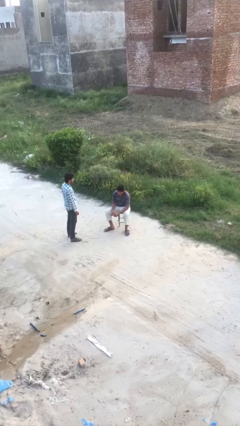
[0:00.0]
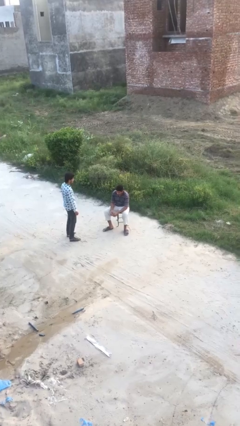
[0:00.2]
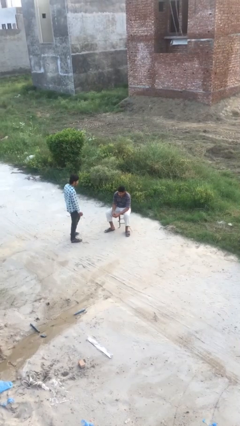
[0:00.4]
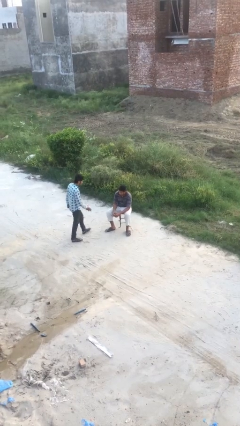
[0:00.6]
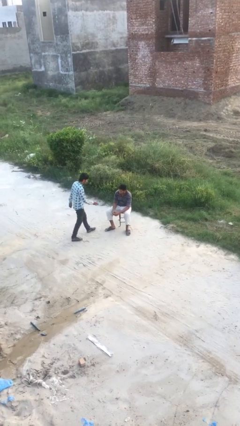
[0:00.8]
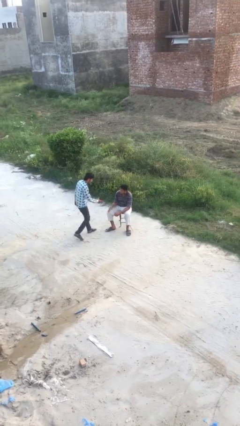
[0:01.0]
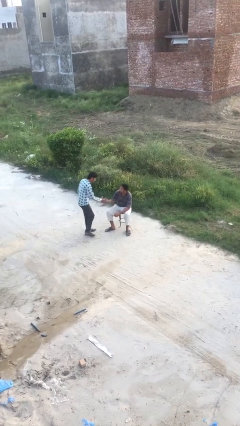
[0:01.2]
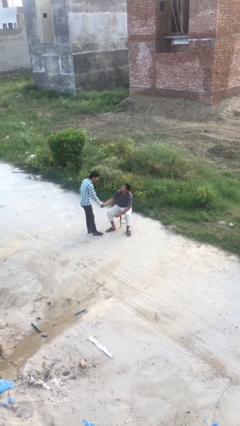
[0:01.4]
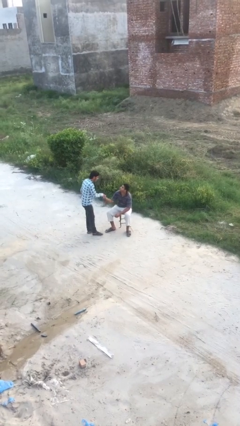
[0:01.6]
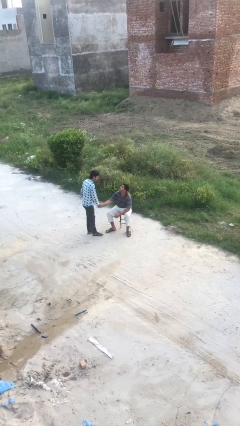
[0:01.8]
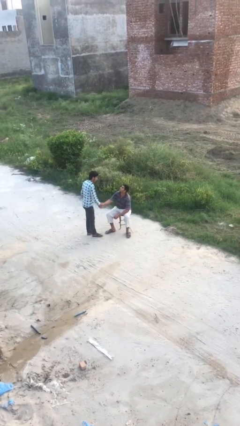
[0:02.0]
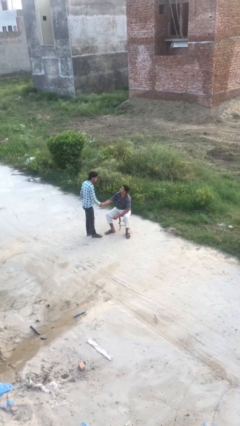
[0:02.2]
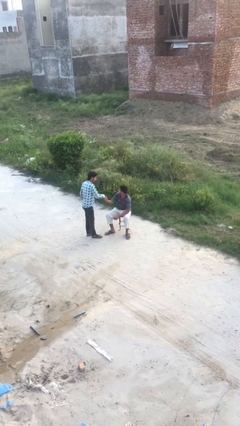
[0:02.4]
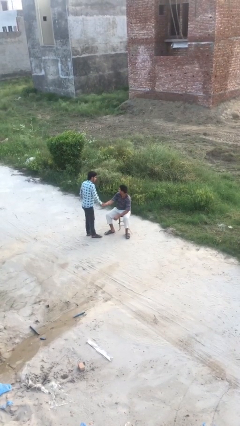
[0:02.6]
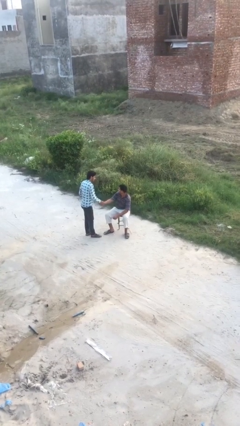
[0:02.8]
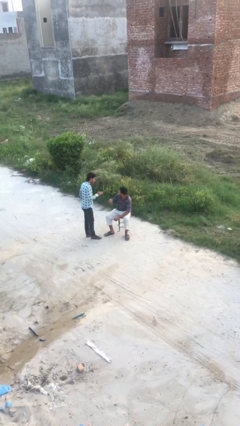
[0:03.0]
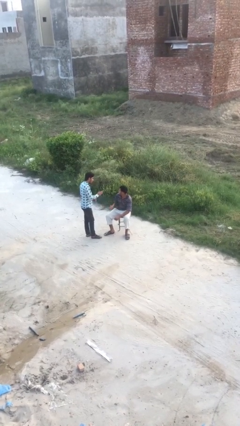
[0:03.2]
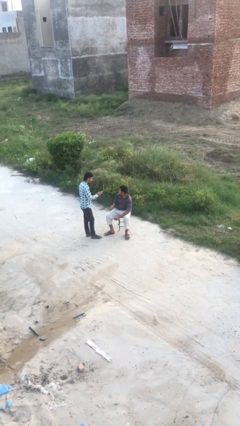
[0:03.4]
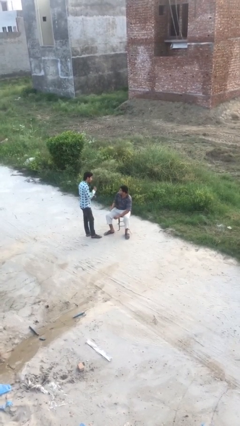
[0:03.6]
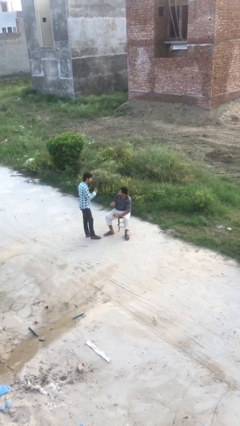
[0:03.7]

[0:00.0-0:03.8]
person shakes hand

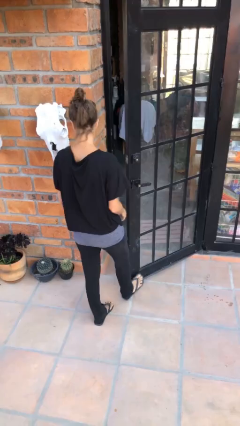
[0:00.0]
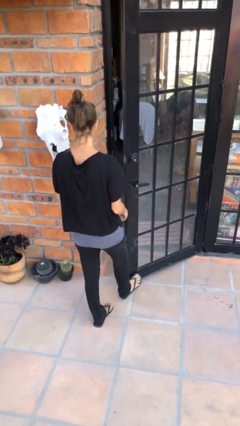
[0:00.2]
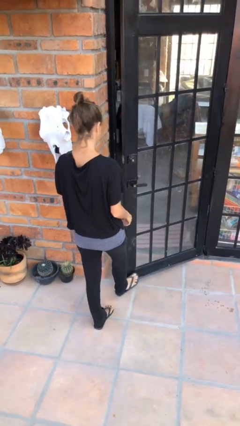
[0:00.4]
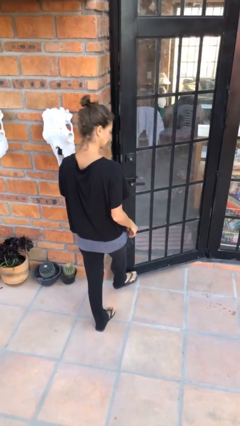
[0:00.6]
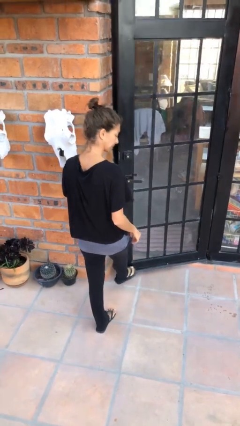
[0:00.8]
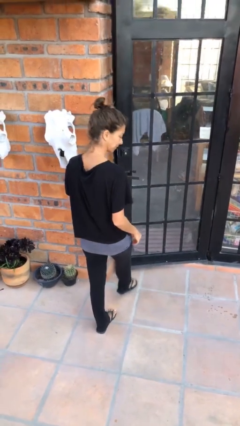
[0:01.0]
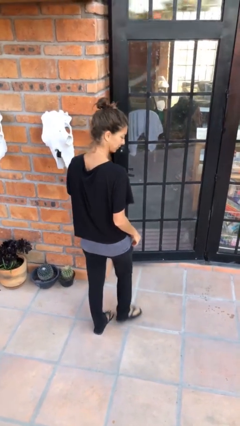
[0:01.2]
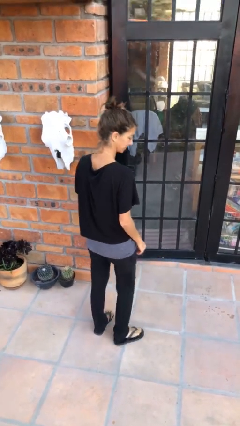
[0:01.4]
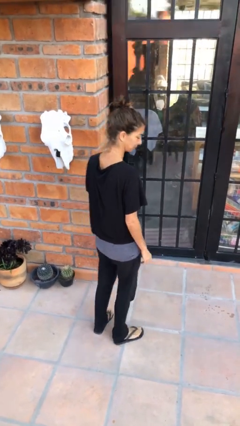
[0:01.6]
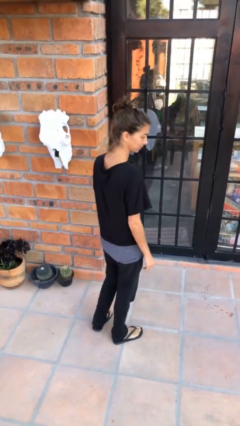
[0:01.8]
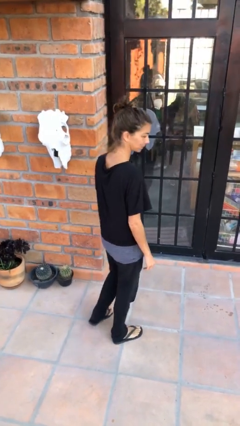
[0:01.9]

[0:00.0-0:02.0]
person closes door with foot

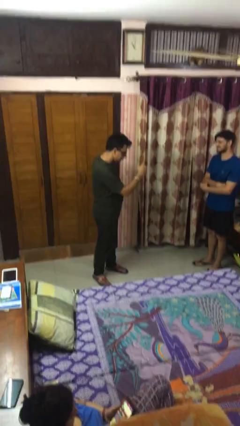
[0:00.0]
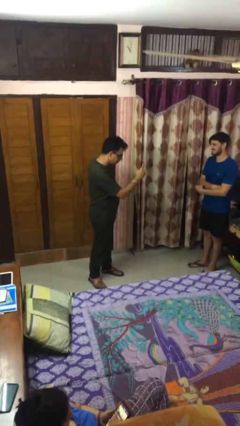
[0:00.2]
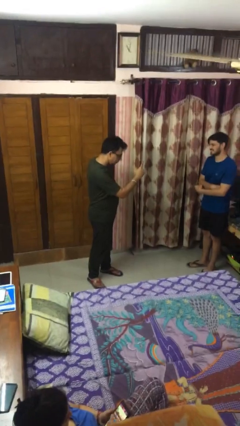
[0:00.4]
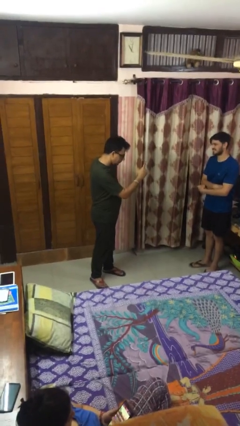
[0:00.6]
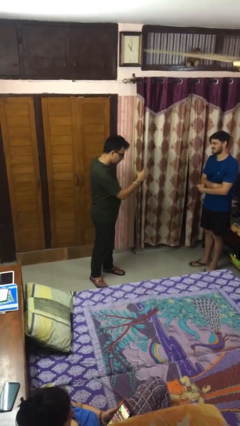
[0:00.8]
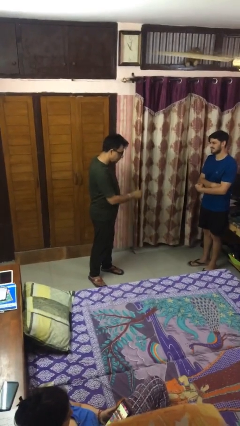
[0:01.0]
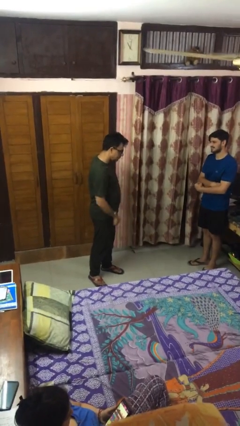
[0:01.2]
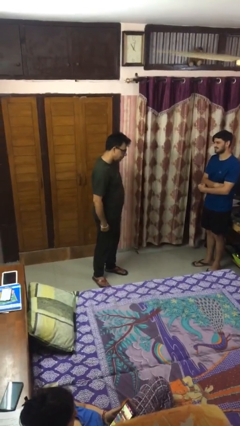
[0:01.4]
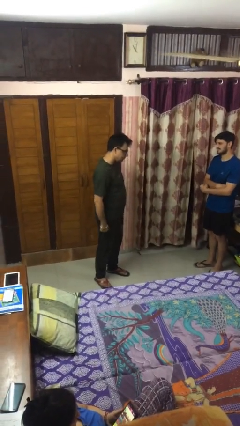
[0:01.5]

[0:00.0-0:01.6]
person points at person

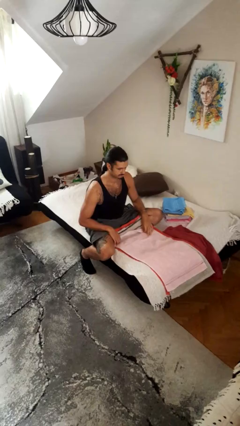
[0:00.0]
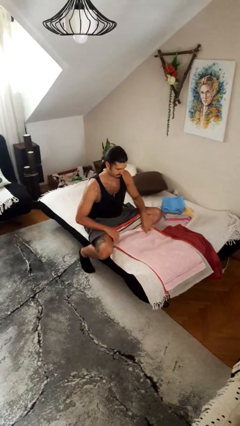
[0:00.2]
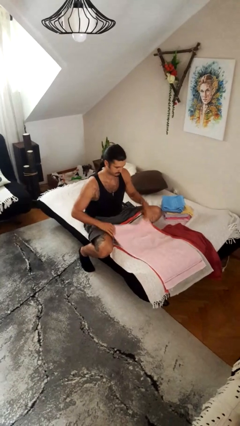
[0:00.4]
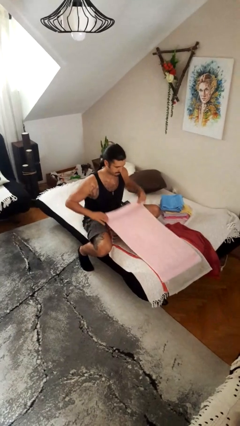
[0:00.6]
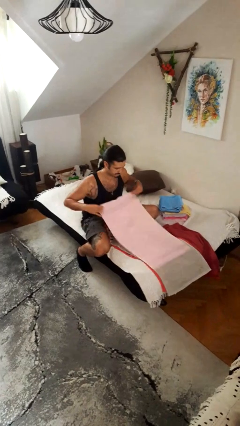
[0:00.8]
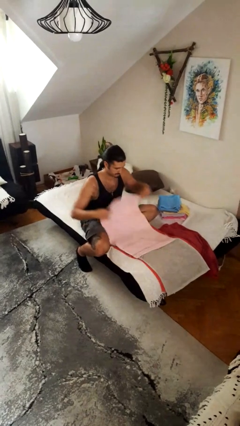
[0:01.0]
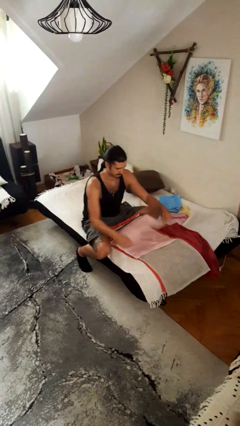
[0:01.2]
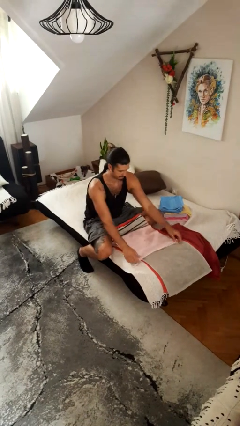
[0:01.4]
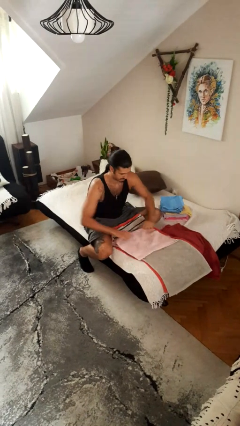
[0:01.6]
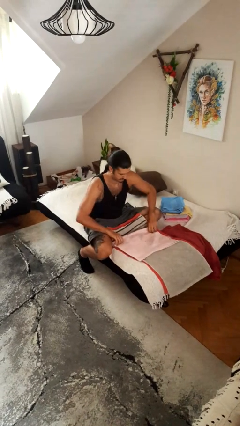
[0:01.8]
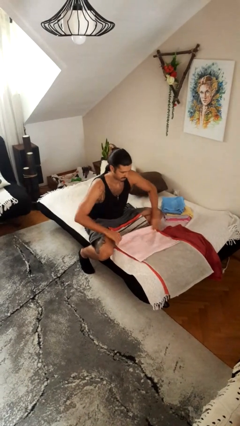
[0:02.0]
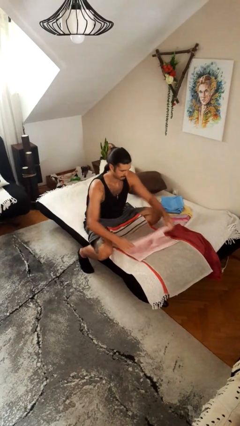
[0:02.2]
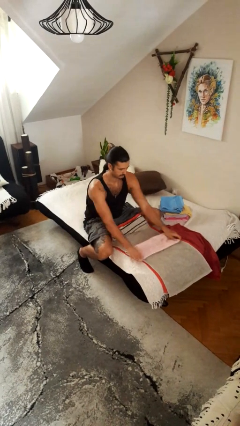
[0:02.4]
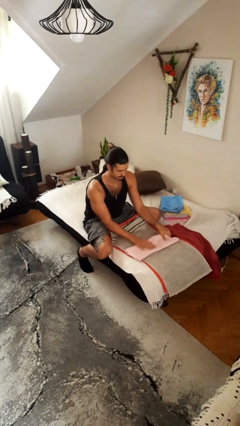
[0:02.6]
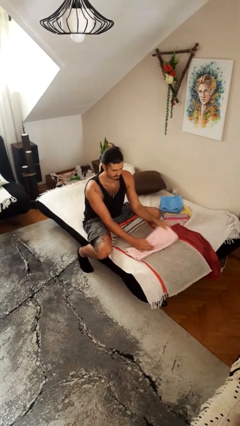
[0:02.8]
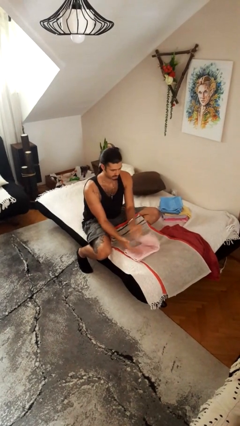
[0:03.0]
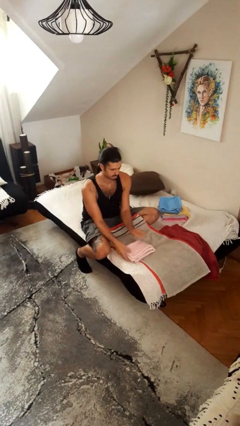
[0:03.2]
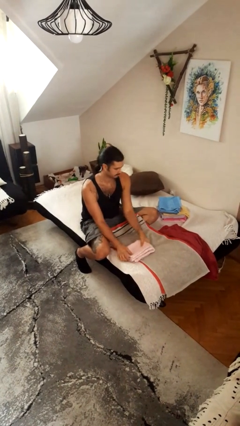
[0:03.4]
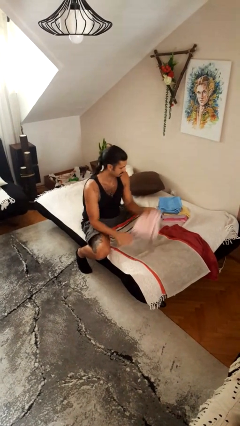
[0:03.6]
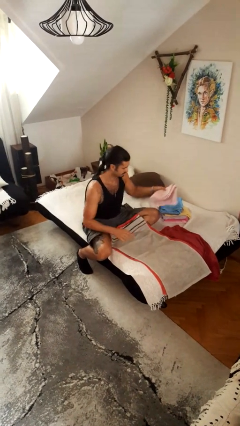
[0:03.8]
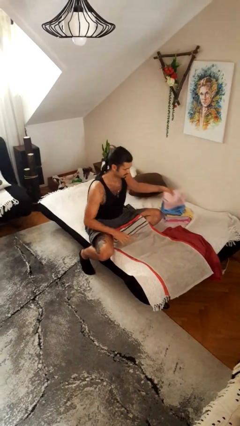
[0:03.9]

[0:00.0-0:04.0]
person folds towel

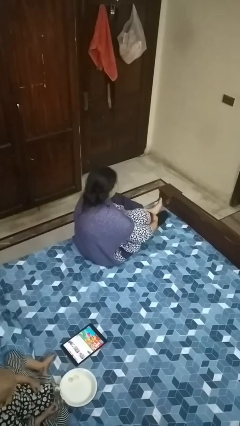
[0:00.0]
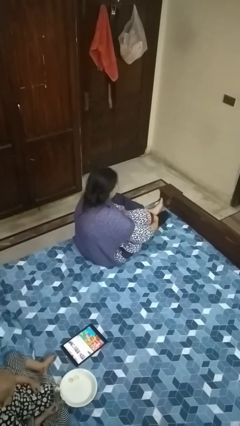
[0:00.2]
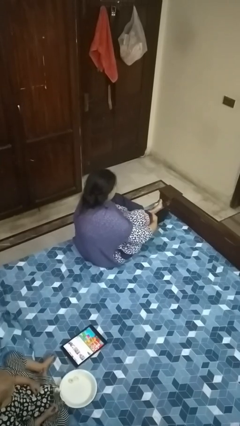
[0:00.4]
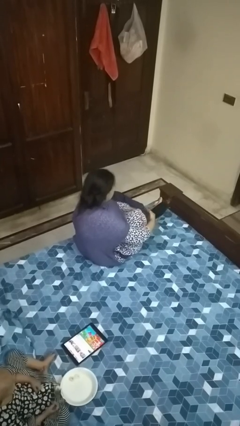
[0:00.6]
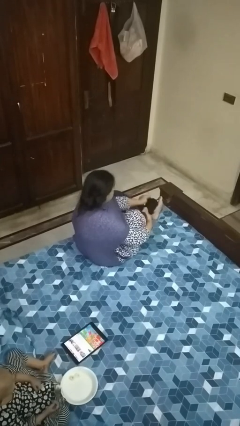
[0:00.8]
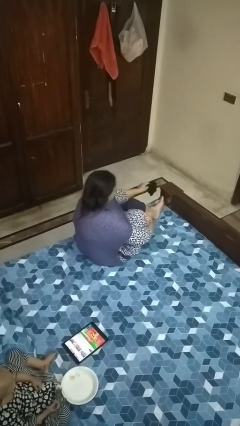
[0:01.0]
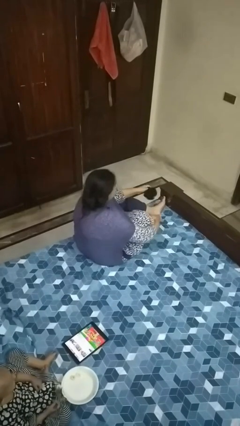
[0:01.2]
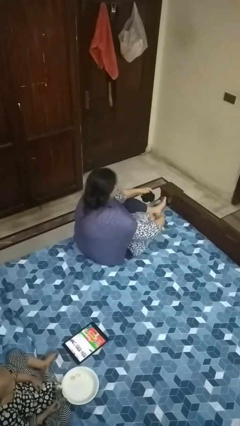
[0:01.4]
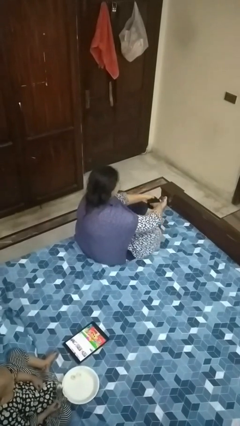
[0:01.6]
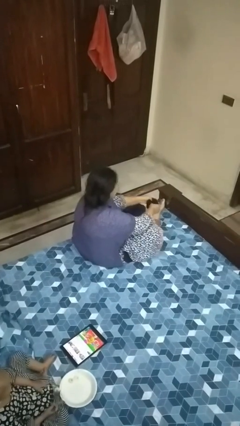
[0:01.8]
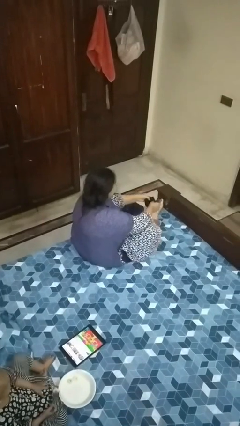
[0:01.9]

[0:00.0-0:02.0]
person takes off socks

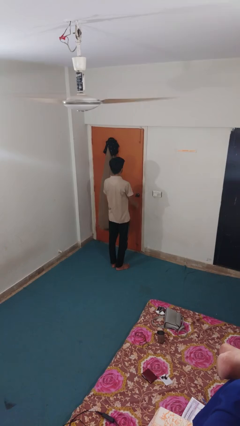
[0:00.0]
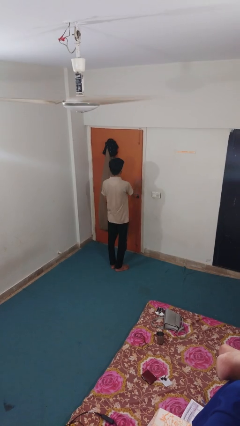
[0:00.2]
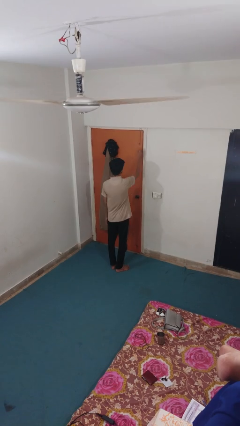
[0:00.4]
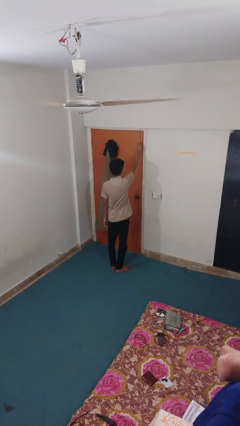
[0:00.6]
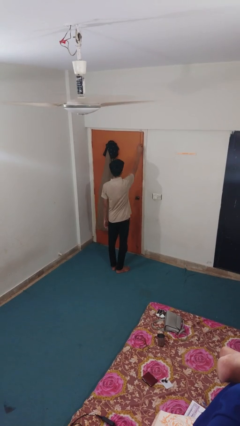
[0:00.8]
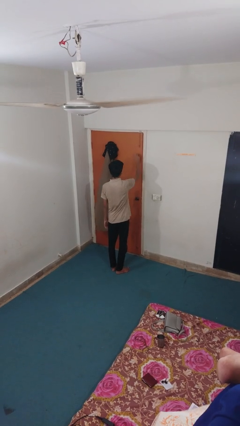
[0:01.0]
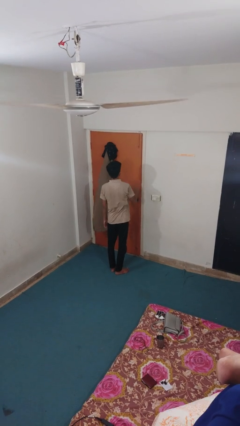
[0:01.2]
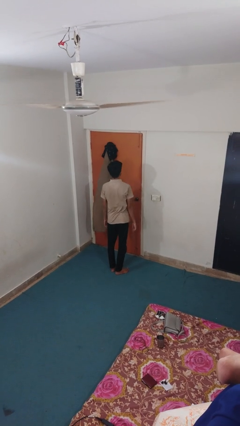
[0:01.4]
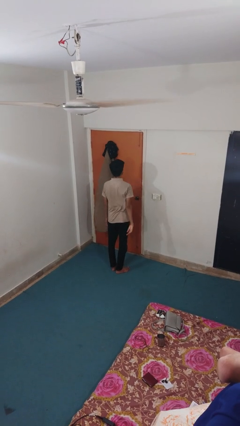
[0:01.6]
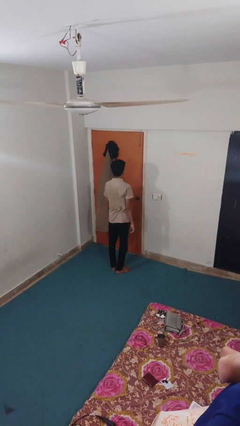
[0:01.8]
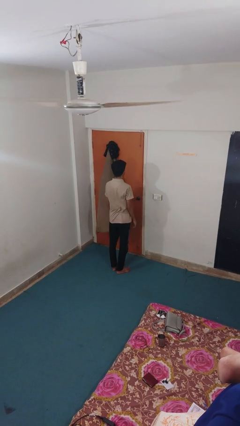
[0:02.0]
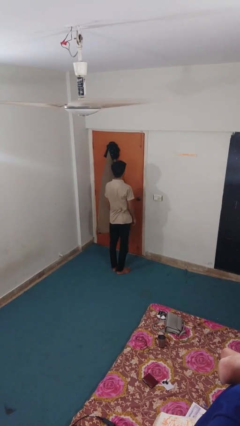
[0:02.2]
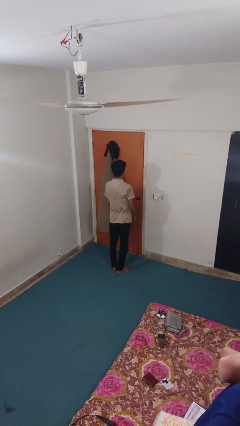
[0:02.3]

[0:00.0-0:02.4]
person unlocks door with keys

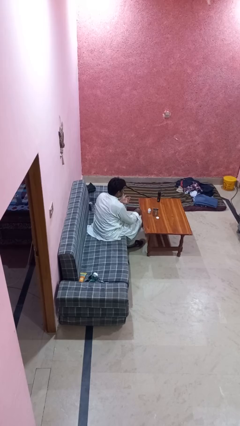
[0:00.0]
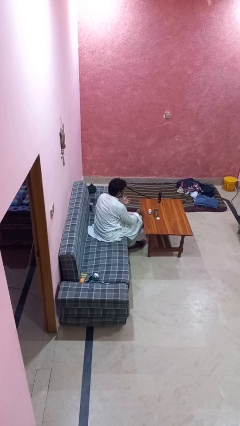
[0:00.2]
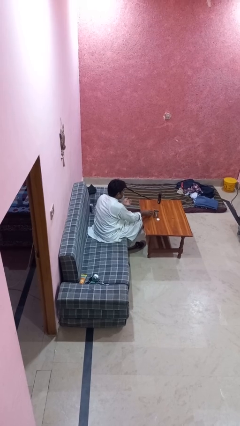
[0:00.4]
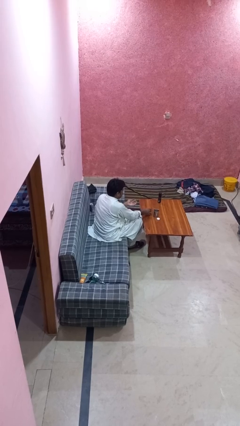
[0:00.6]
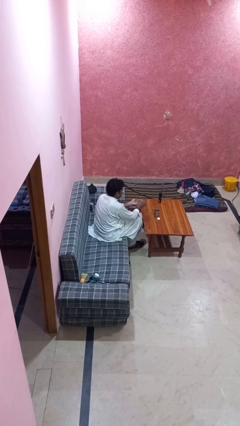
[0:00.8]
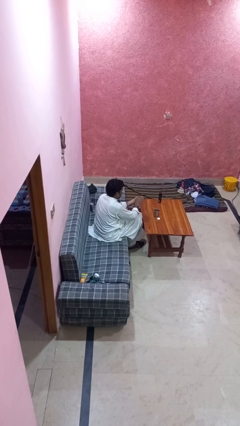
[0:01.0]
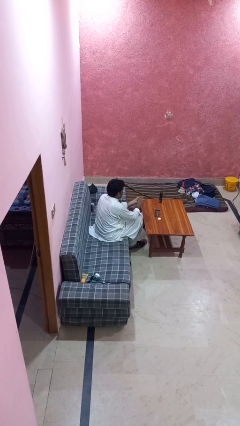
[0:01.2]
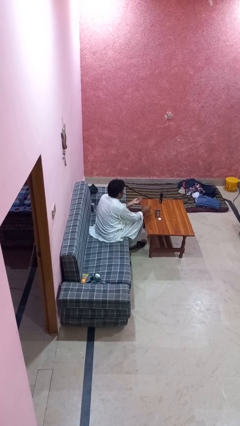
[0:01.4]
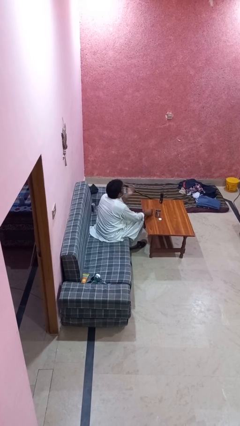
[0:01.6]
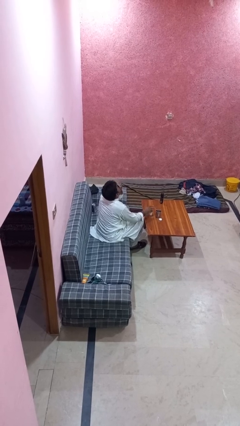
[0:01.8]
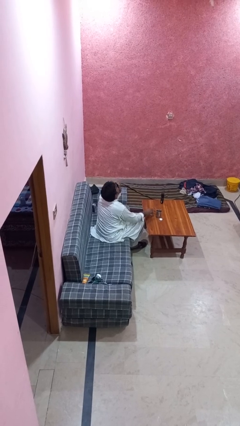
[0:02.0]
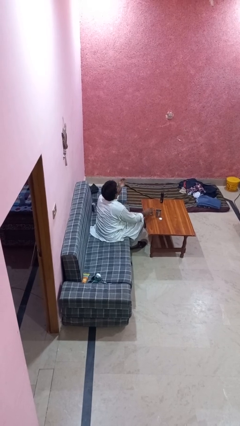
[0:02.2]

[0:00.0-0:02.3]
person takes medicine pills
